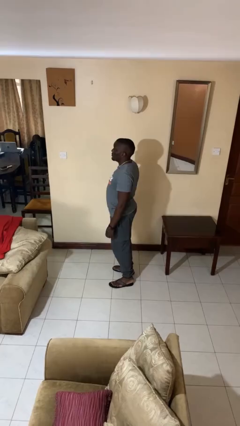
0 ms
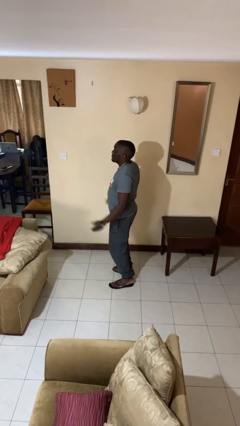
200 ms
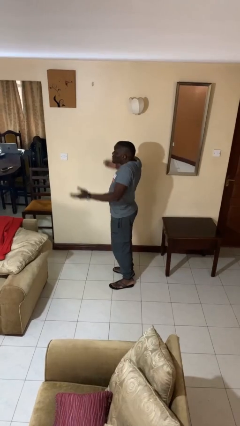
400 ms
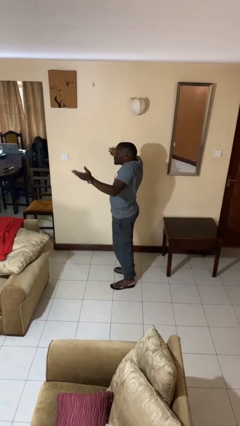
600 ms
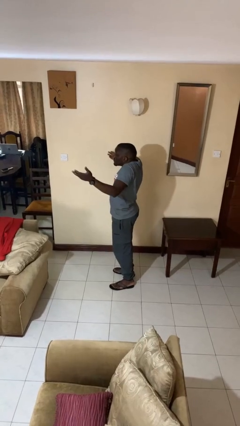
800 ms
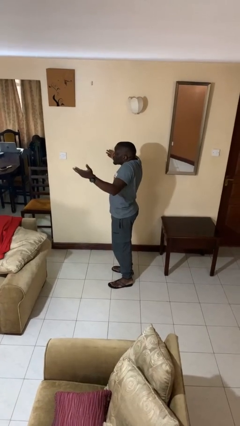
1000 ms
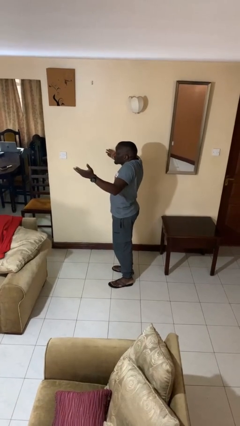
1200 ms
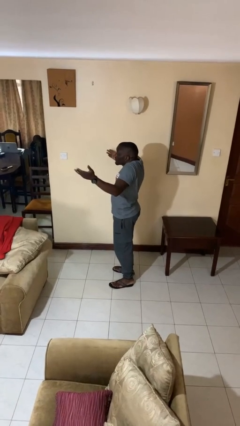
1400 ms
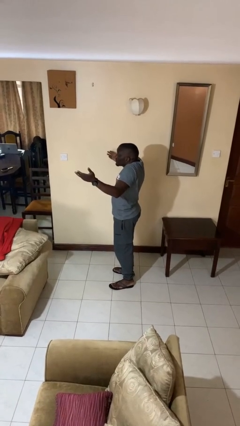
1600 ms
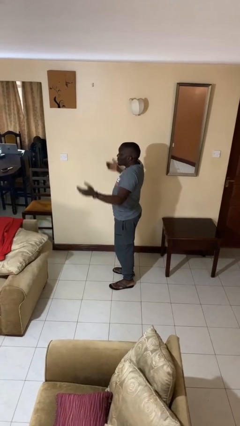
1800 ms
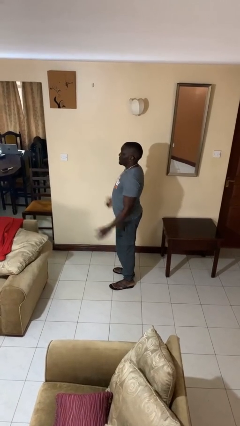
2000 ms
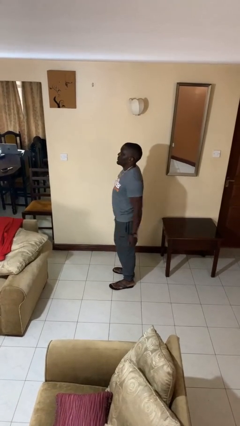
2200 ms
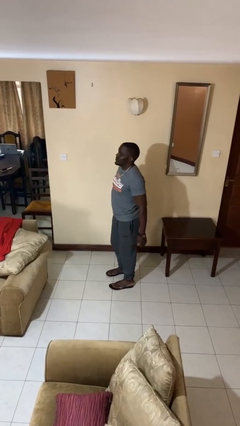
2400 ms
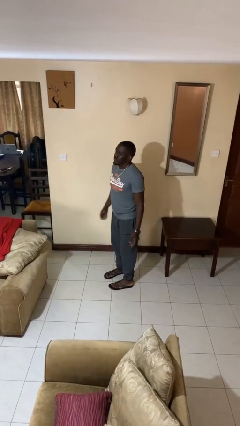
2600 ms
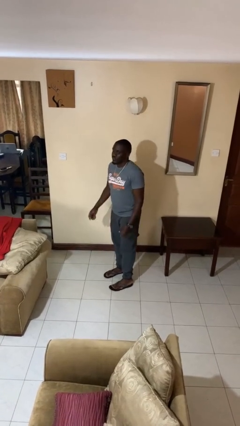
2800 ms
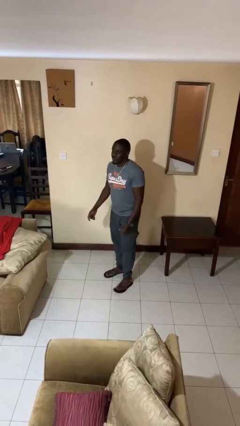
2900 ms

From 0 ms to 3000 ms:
person shrugs

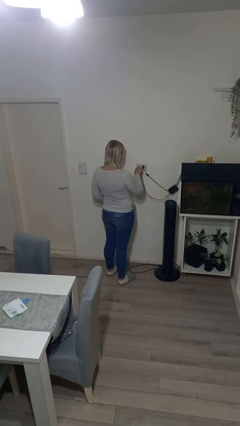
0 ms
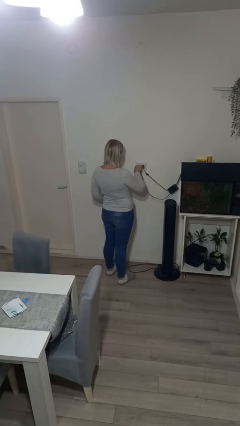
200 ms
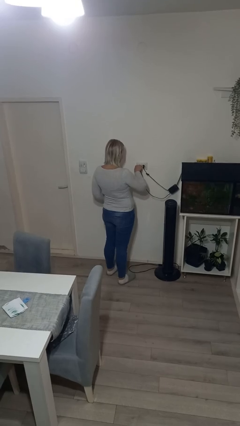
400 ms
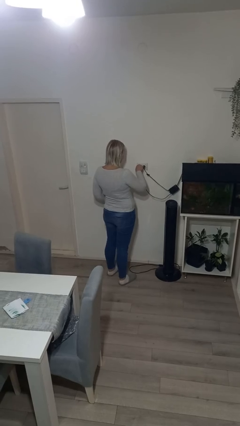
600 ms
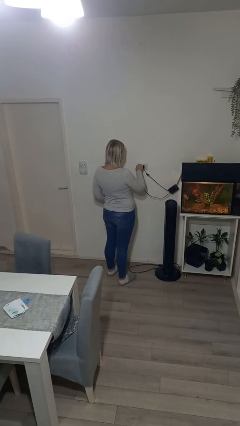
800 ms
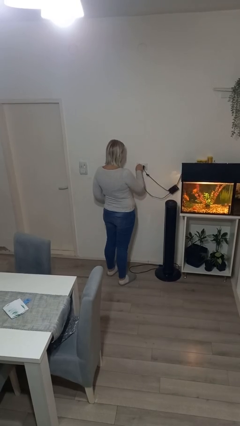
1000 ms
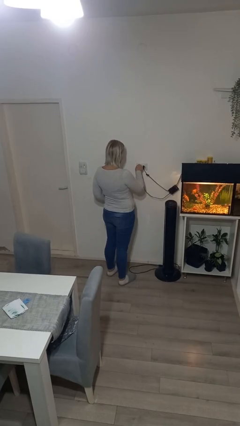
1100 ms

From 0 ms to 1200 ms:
person plugs into electrical socket

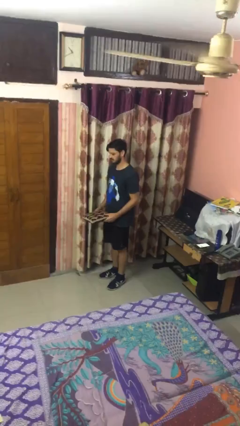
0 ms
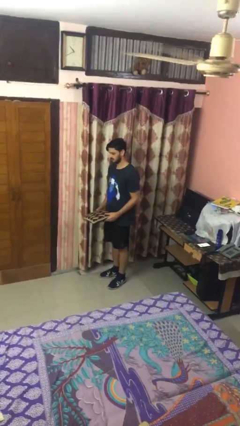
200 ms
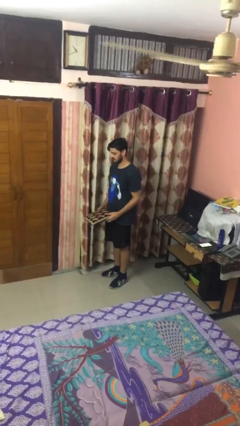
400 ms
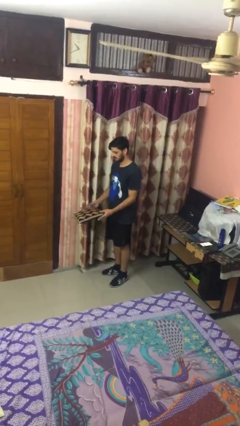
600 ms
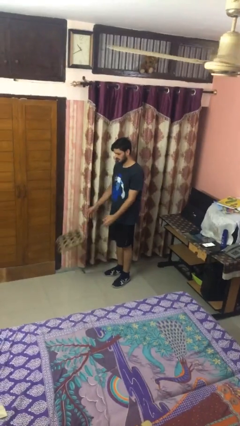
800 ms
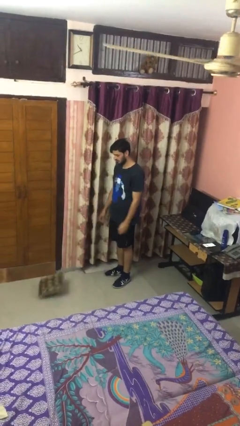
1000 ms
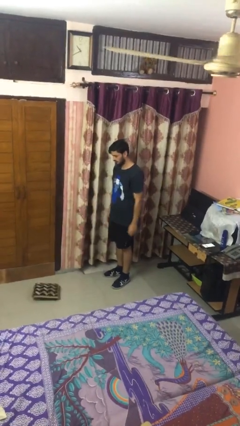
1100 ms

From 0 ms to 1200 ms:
person throws object to ground

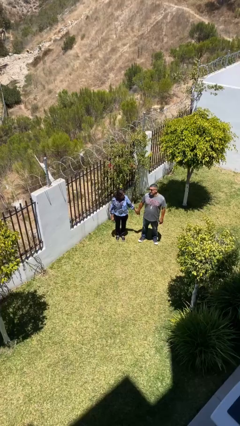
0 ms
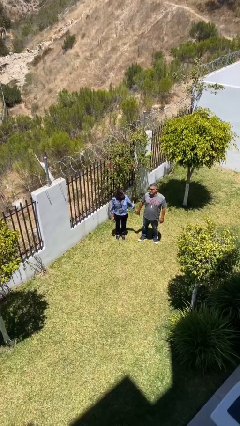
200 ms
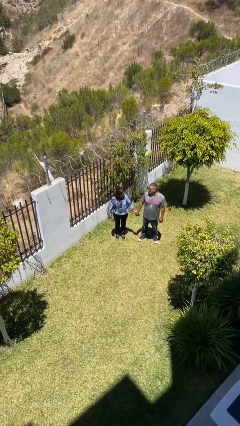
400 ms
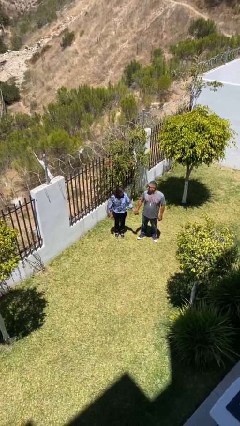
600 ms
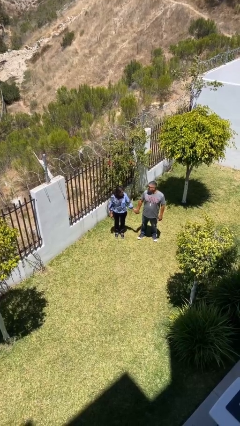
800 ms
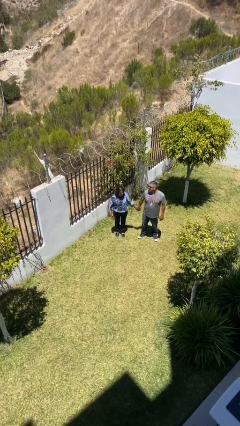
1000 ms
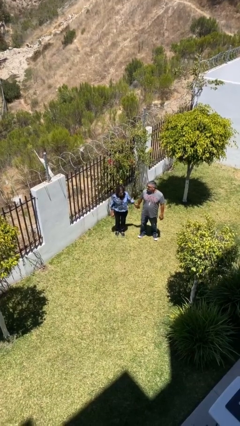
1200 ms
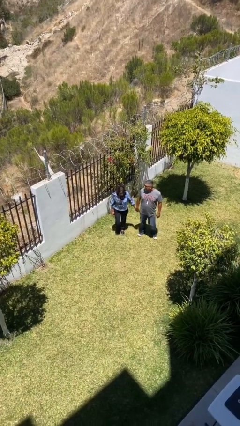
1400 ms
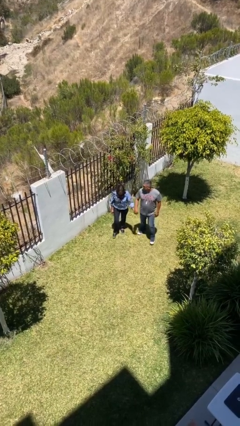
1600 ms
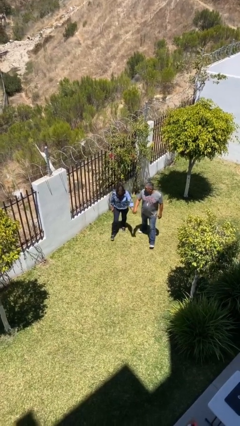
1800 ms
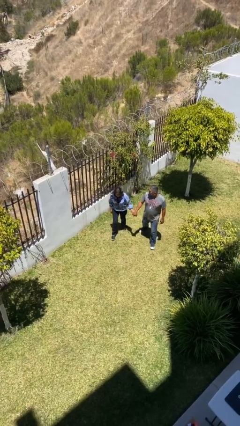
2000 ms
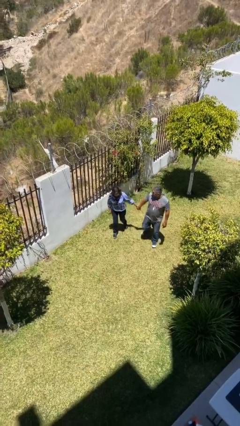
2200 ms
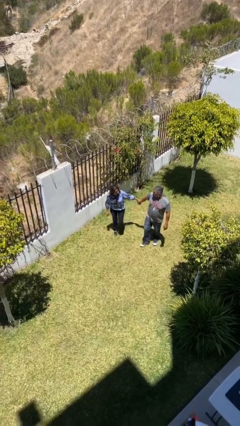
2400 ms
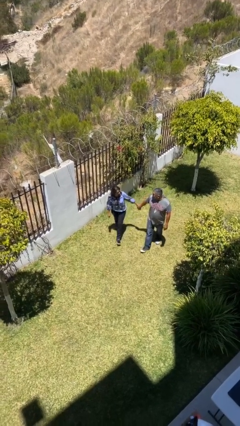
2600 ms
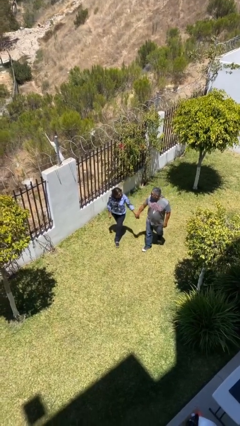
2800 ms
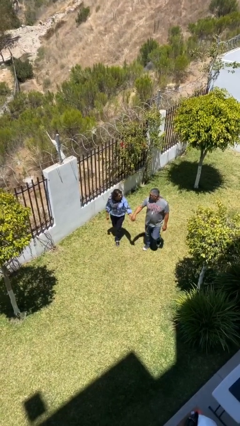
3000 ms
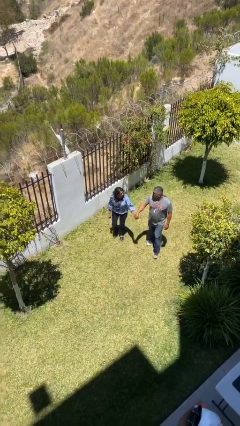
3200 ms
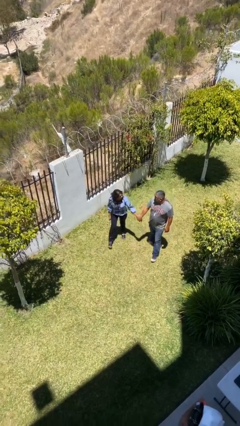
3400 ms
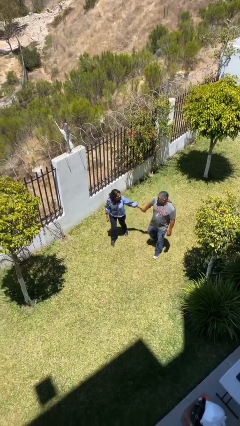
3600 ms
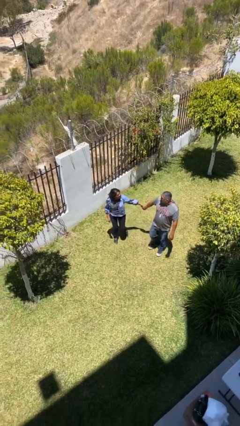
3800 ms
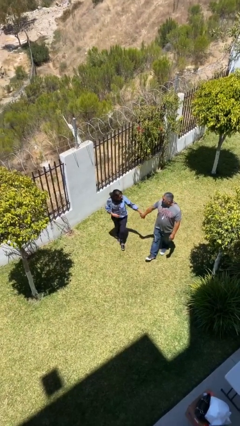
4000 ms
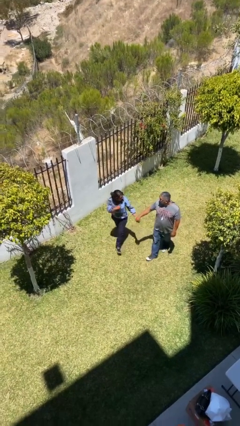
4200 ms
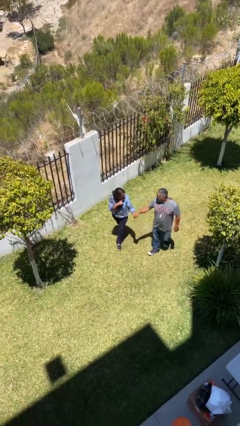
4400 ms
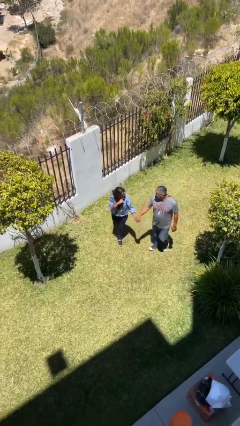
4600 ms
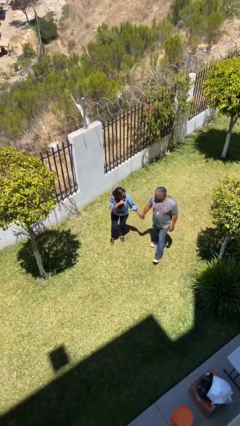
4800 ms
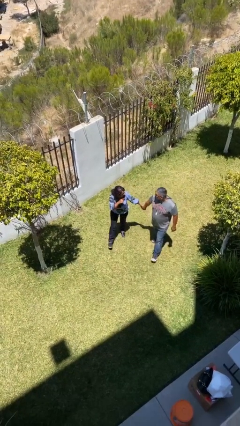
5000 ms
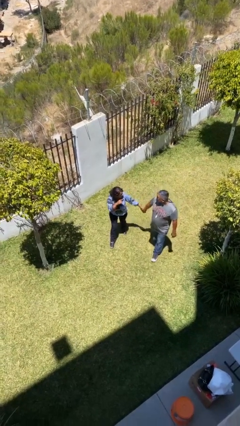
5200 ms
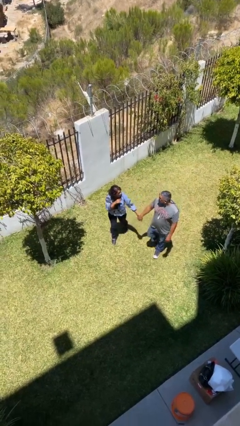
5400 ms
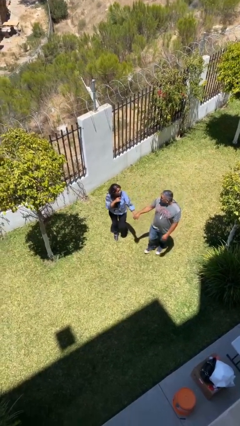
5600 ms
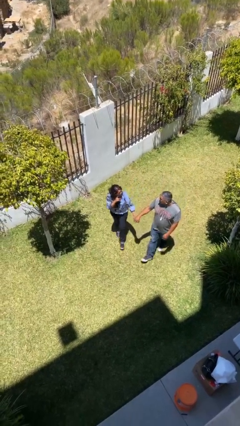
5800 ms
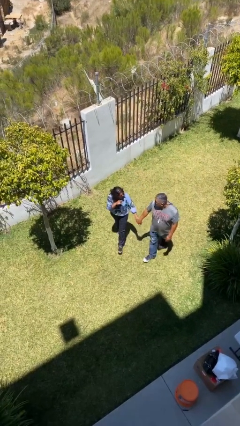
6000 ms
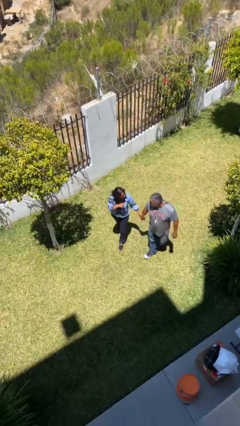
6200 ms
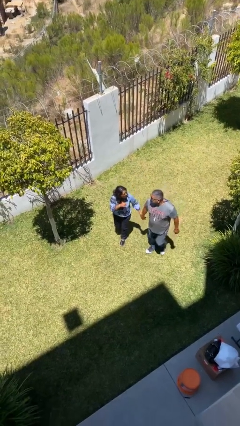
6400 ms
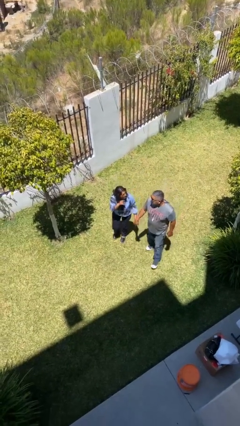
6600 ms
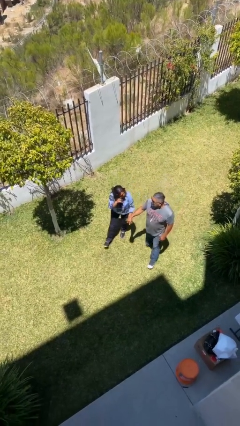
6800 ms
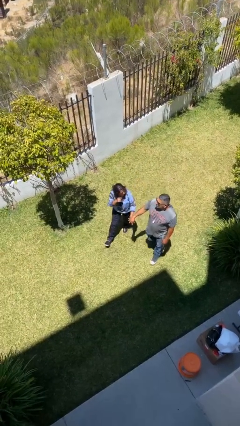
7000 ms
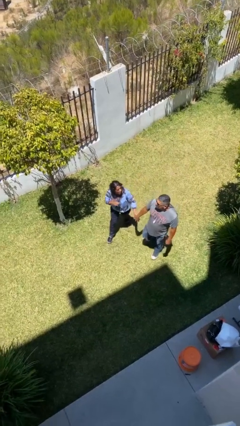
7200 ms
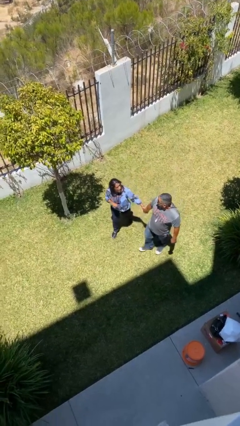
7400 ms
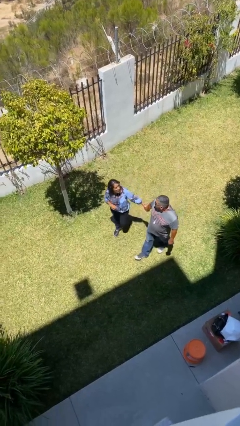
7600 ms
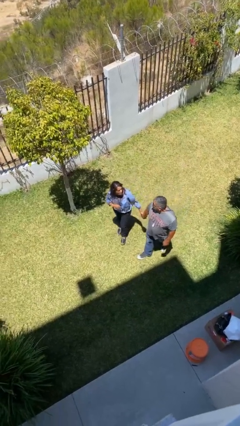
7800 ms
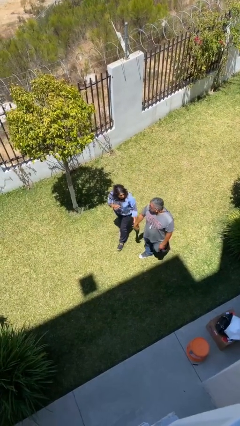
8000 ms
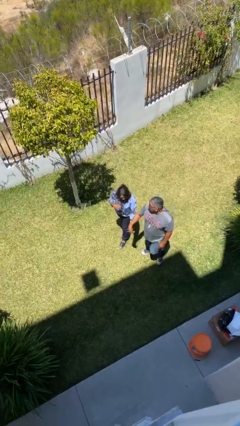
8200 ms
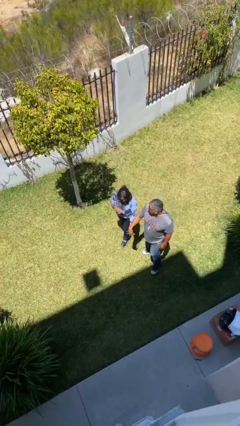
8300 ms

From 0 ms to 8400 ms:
person holds hand

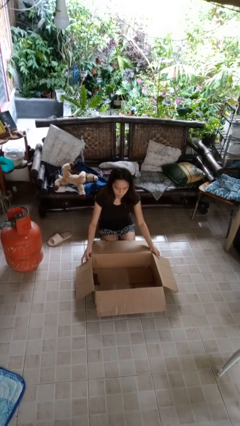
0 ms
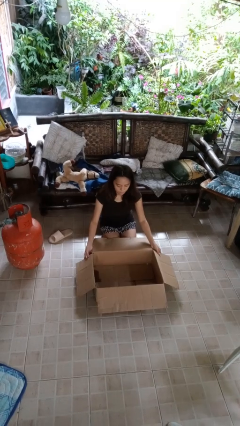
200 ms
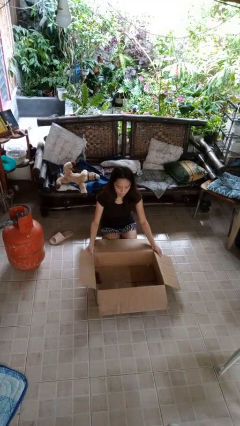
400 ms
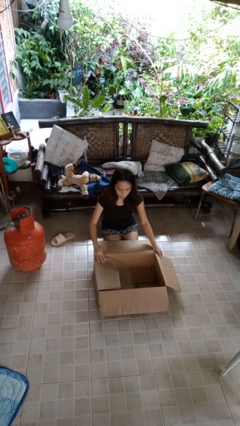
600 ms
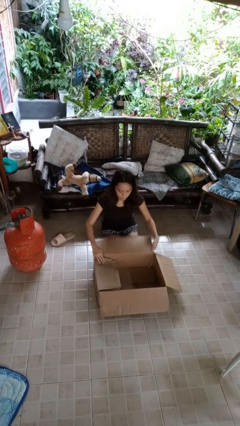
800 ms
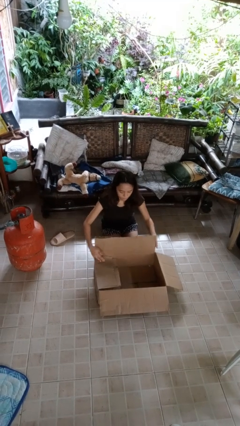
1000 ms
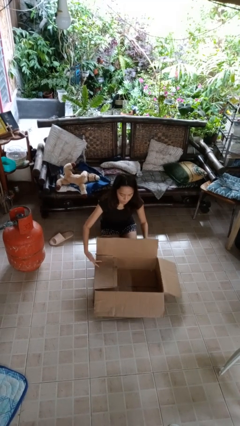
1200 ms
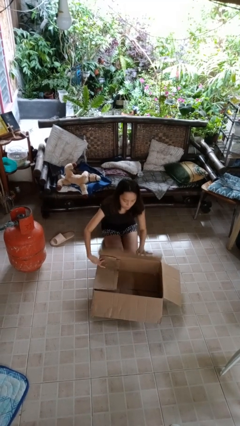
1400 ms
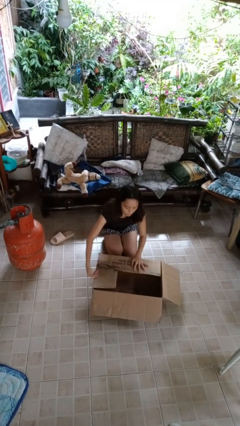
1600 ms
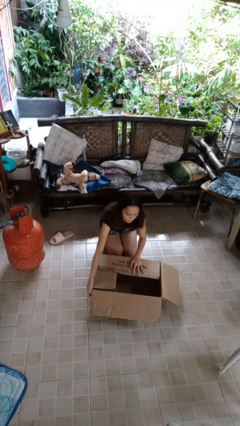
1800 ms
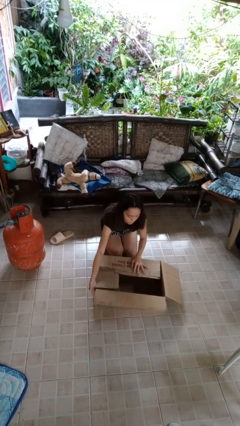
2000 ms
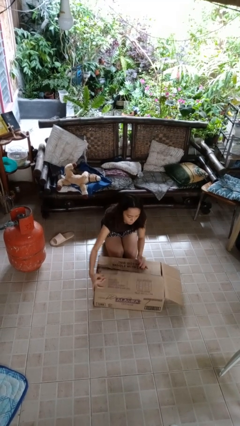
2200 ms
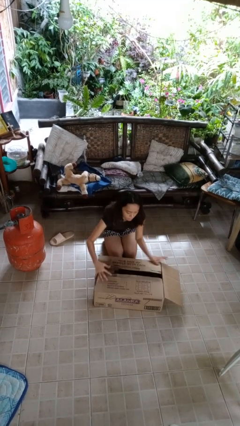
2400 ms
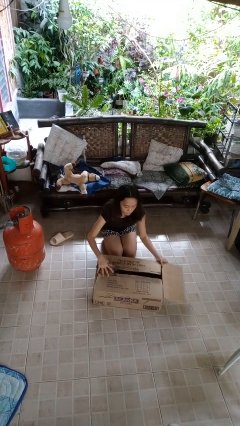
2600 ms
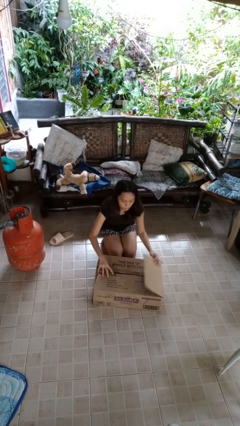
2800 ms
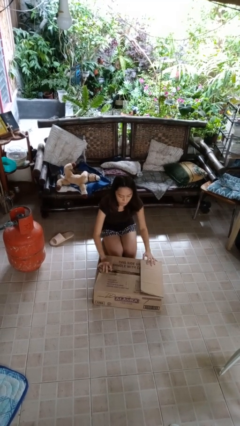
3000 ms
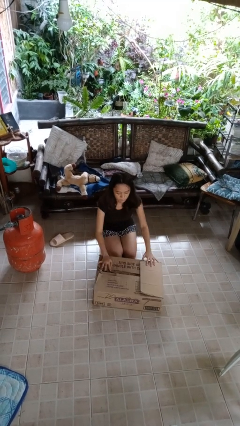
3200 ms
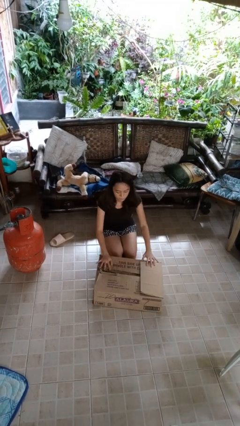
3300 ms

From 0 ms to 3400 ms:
person closes box

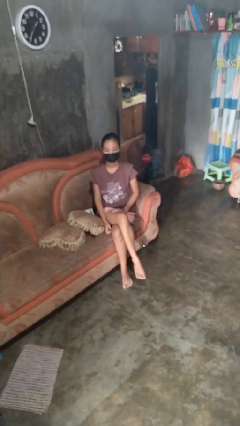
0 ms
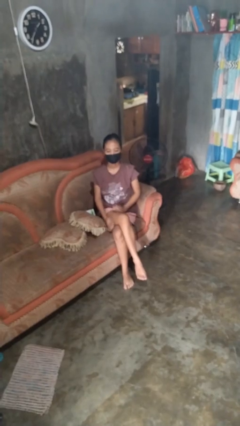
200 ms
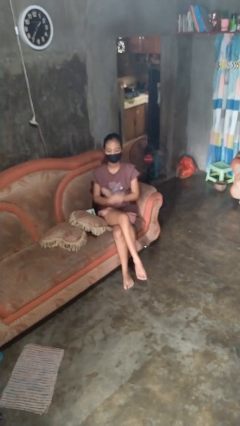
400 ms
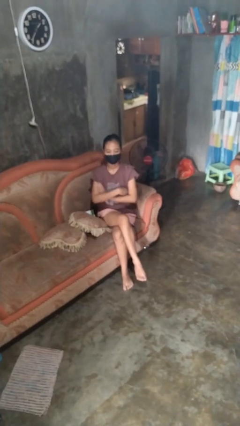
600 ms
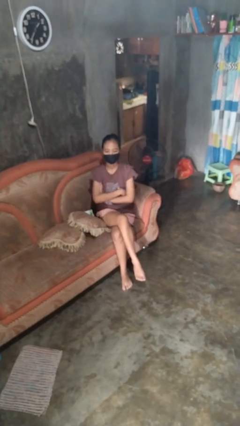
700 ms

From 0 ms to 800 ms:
person crosses arms
